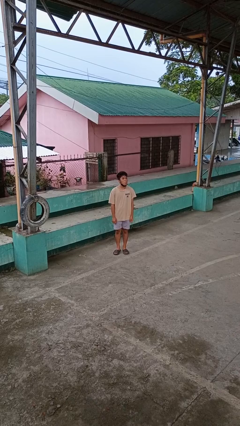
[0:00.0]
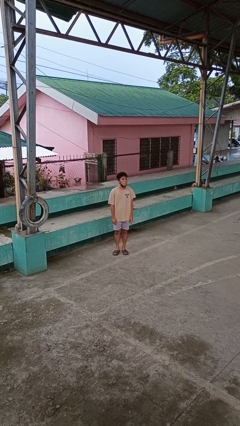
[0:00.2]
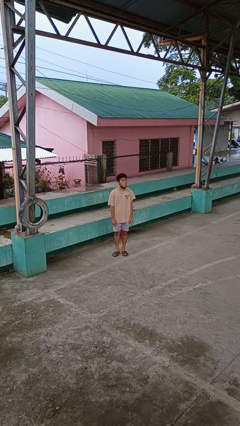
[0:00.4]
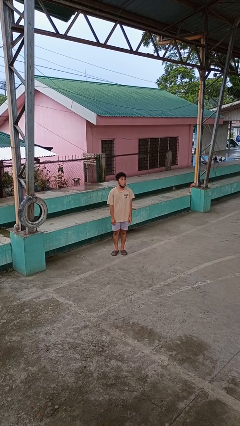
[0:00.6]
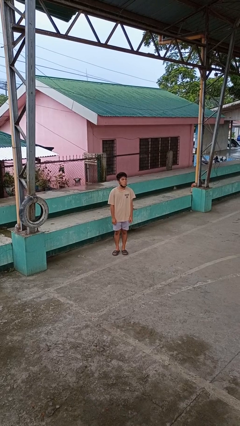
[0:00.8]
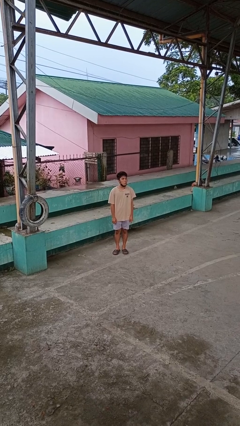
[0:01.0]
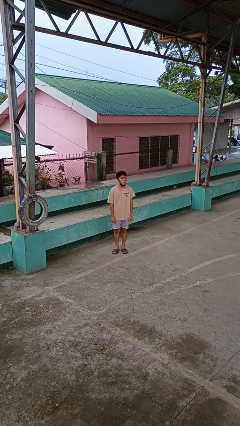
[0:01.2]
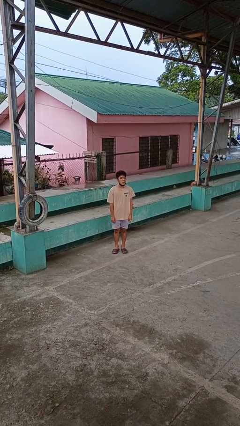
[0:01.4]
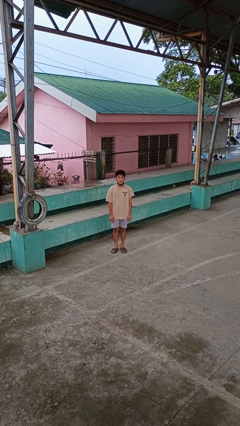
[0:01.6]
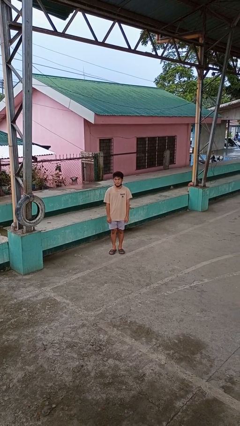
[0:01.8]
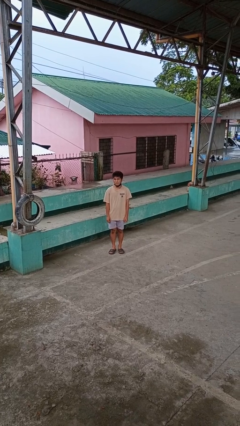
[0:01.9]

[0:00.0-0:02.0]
person sticks out tongue

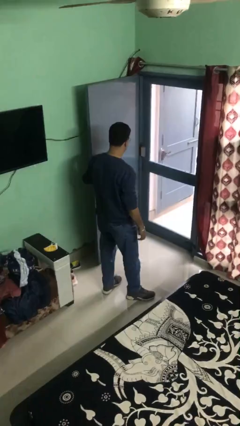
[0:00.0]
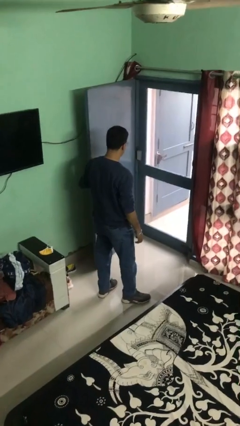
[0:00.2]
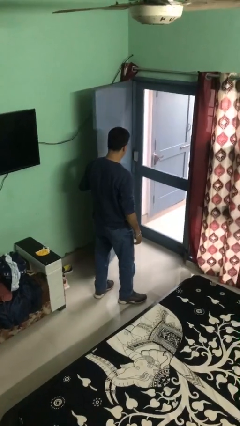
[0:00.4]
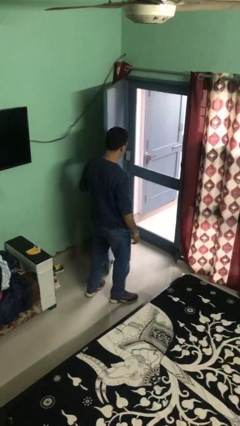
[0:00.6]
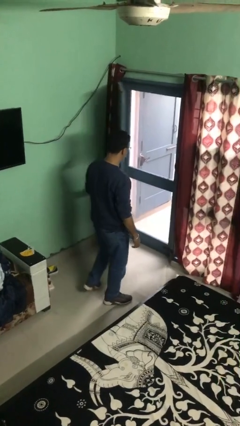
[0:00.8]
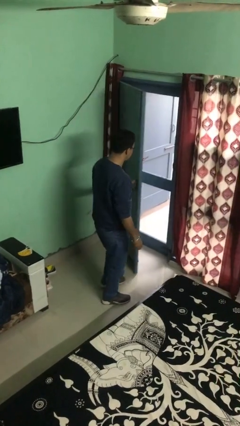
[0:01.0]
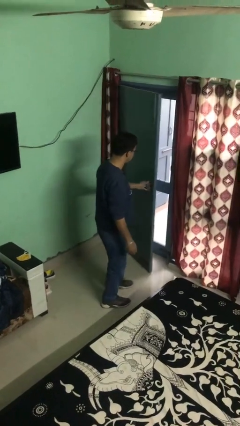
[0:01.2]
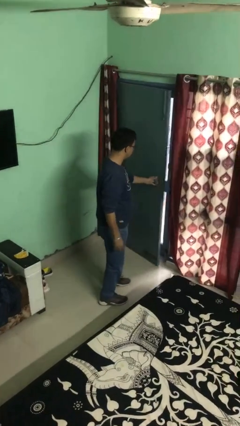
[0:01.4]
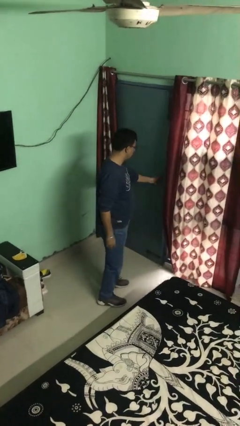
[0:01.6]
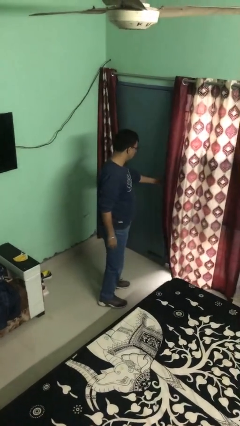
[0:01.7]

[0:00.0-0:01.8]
person closes facility door

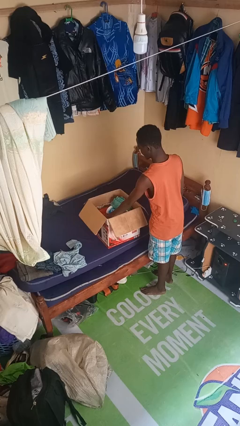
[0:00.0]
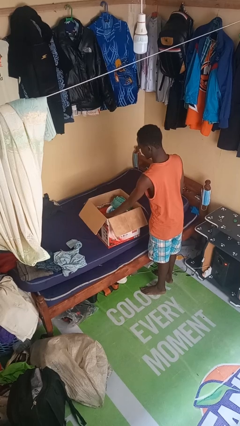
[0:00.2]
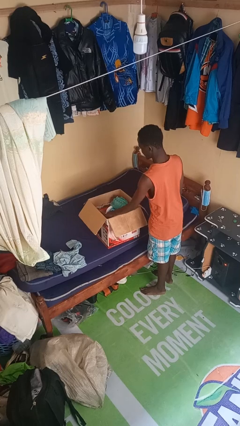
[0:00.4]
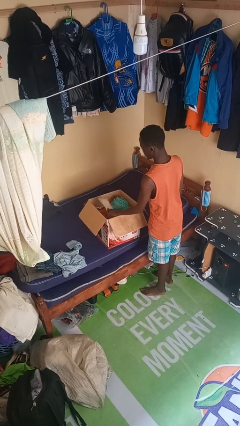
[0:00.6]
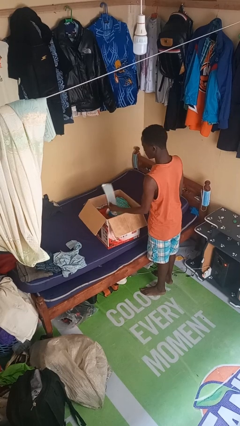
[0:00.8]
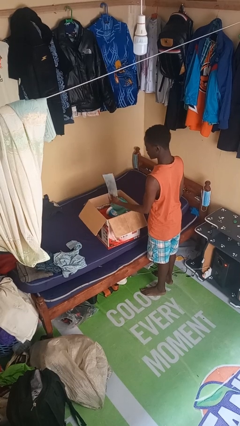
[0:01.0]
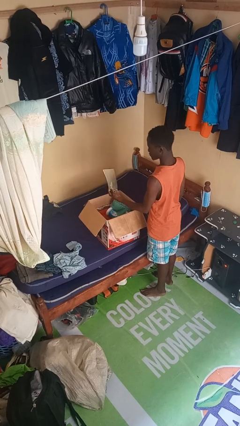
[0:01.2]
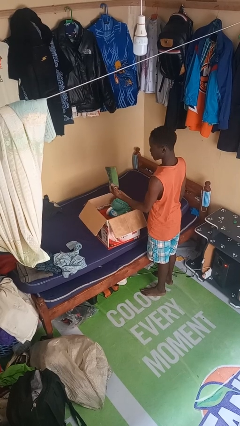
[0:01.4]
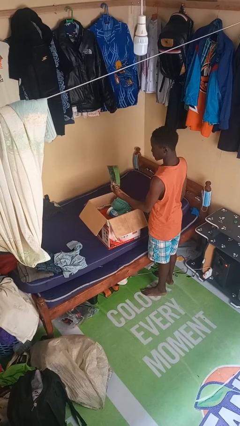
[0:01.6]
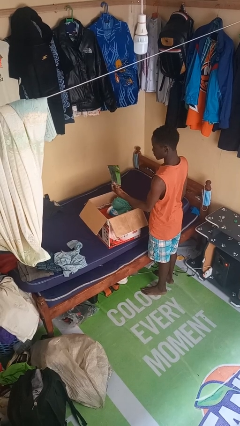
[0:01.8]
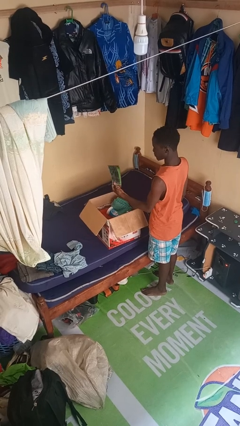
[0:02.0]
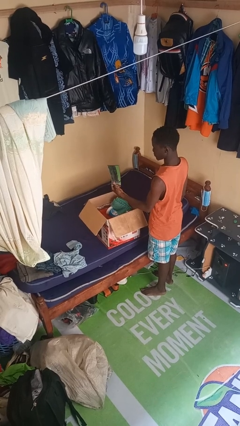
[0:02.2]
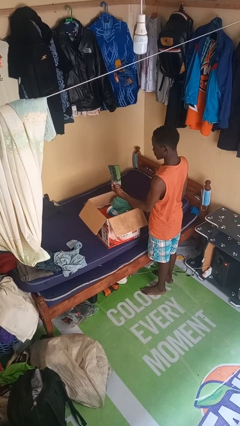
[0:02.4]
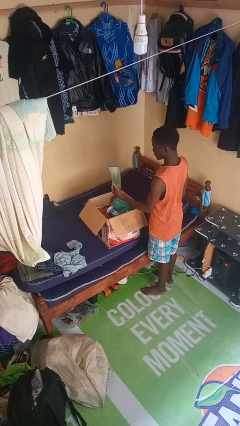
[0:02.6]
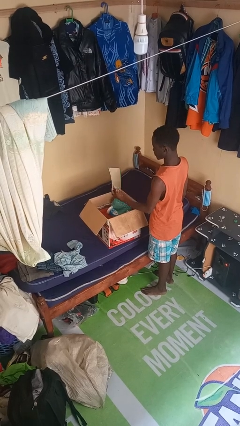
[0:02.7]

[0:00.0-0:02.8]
person takes object from box

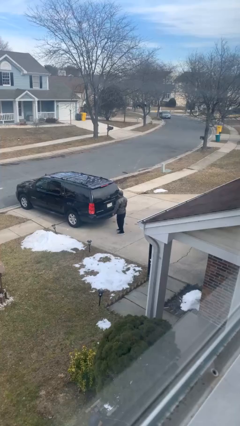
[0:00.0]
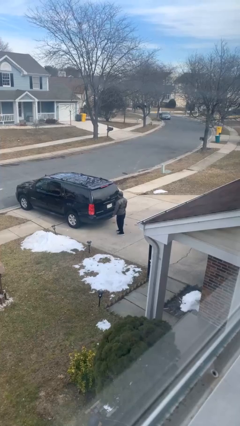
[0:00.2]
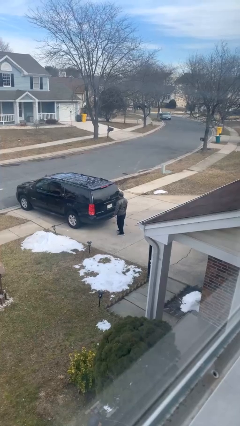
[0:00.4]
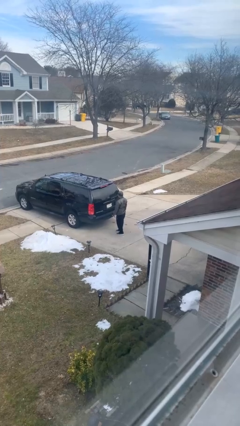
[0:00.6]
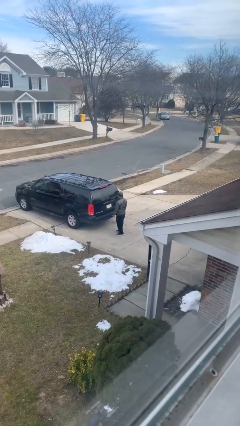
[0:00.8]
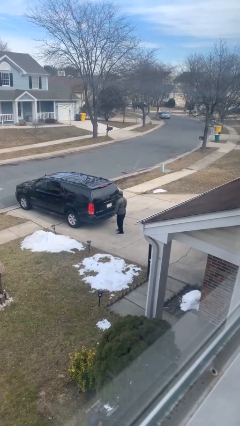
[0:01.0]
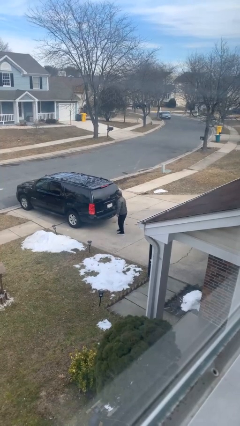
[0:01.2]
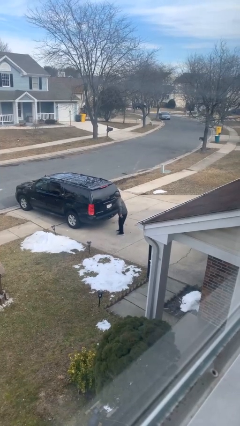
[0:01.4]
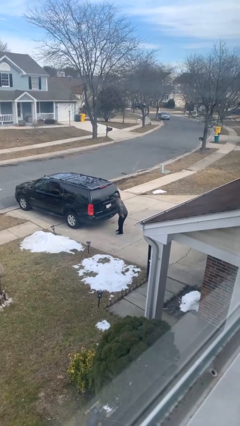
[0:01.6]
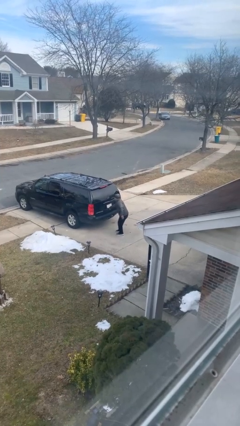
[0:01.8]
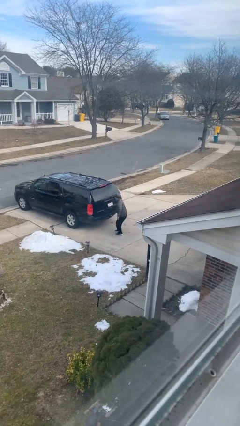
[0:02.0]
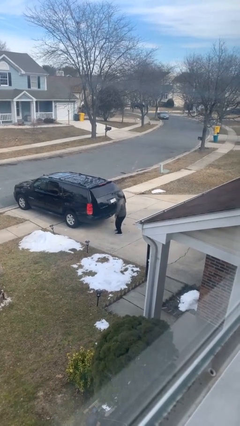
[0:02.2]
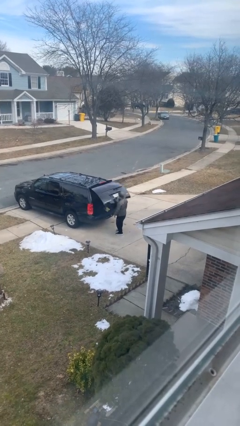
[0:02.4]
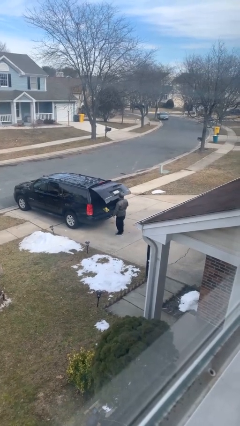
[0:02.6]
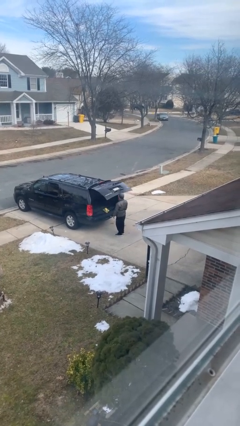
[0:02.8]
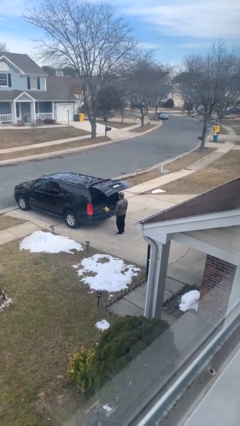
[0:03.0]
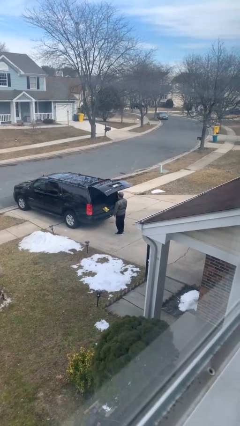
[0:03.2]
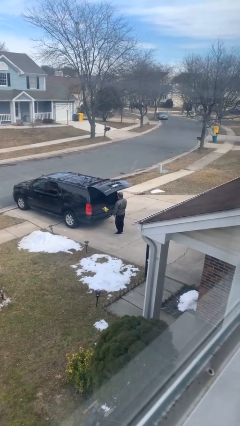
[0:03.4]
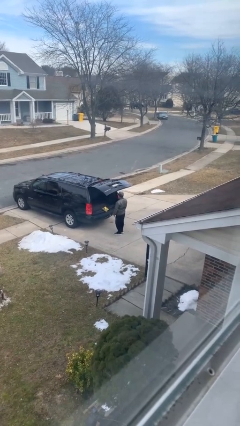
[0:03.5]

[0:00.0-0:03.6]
person opens car trunk

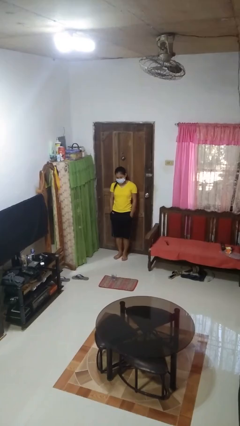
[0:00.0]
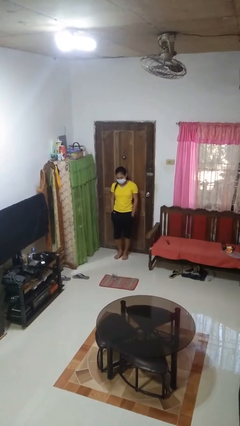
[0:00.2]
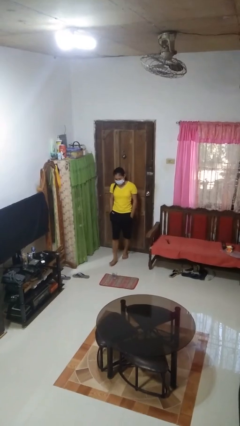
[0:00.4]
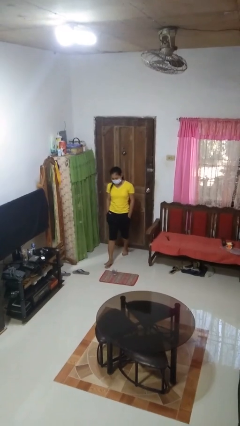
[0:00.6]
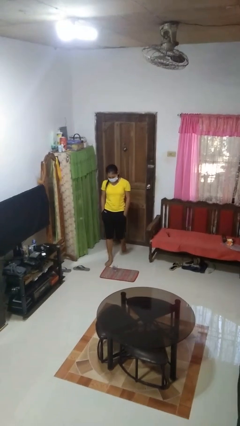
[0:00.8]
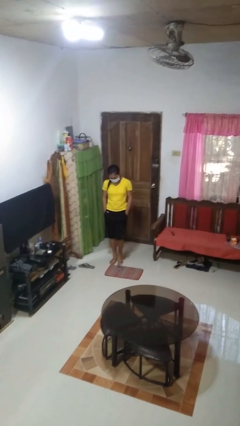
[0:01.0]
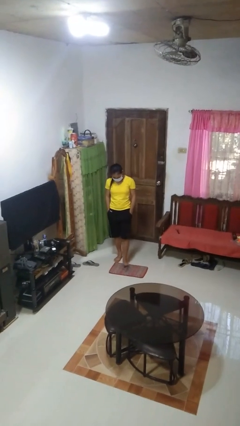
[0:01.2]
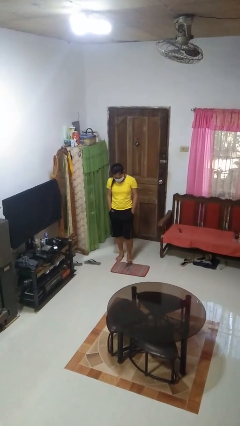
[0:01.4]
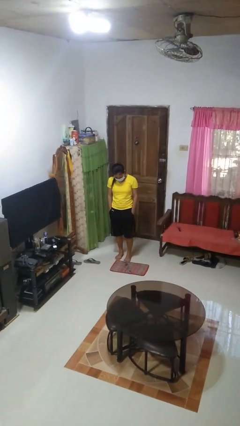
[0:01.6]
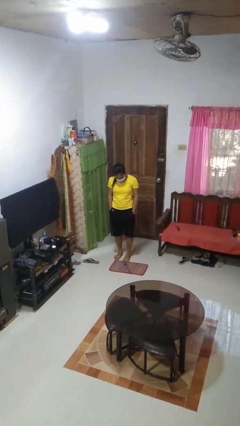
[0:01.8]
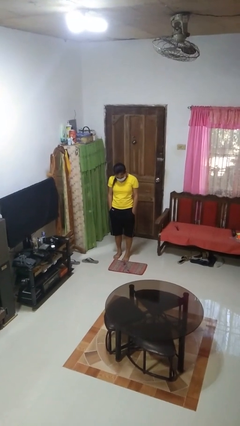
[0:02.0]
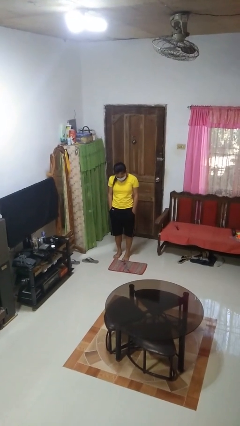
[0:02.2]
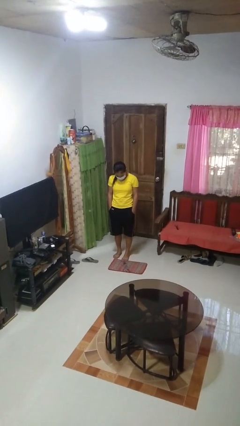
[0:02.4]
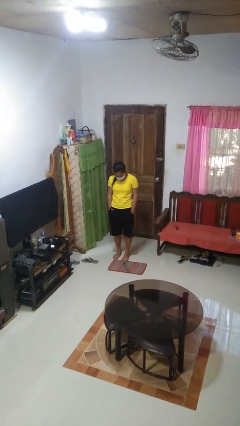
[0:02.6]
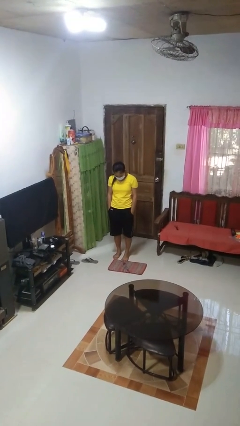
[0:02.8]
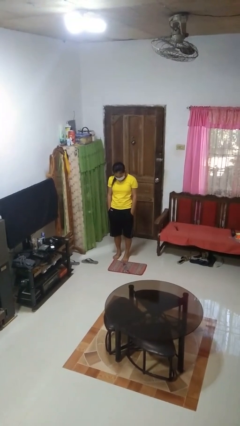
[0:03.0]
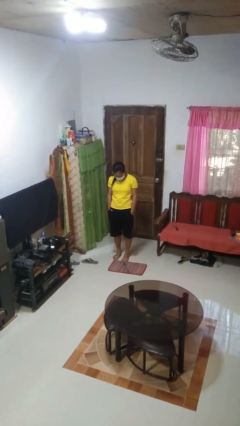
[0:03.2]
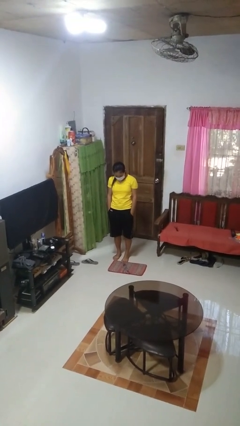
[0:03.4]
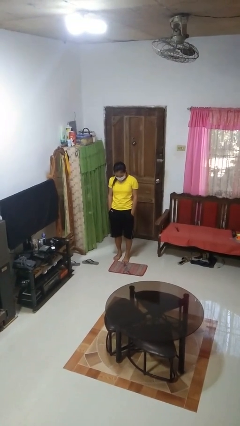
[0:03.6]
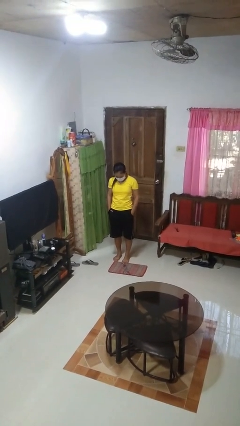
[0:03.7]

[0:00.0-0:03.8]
person spills on floor

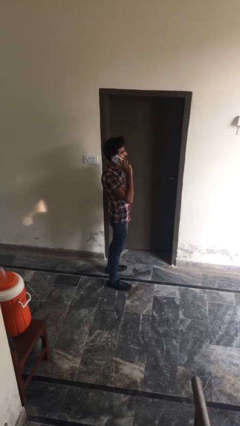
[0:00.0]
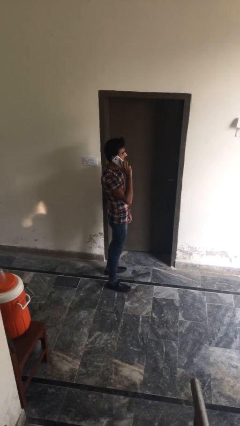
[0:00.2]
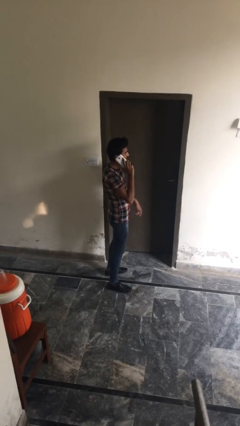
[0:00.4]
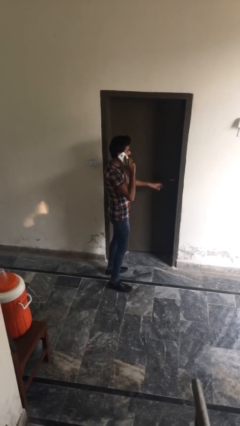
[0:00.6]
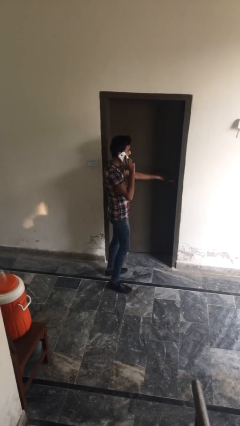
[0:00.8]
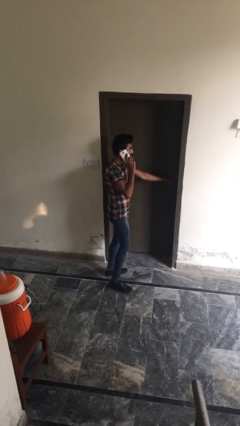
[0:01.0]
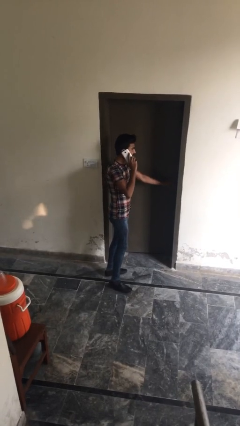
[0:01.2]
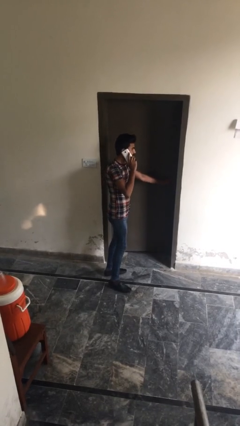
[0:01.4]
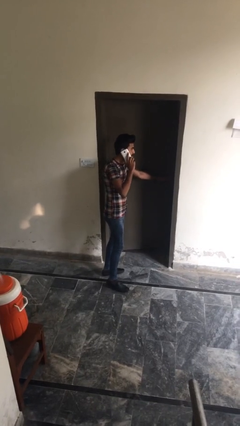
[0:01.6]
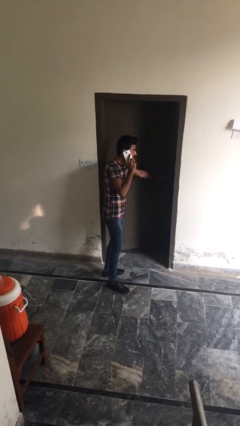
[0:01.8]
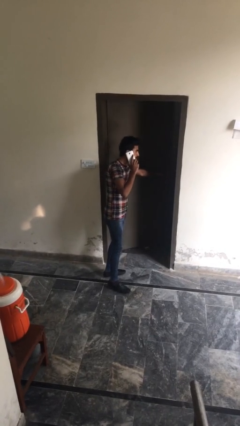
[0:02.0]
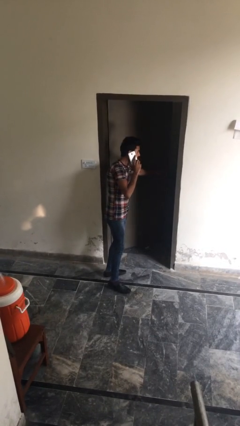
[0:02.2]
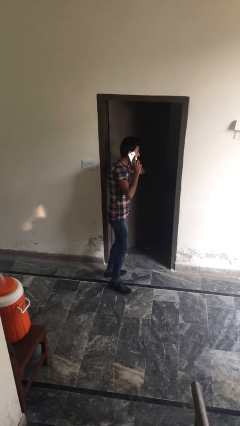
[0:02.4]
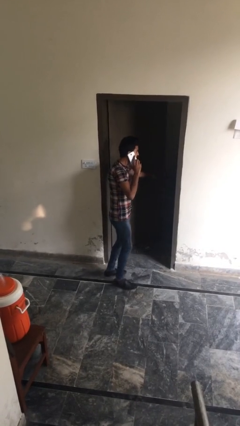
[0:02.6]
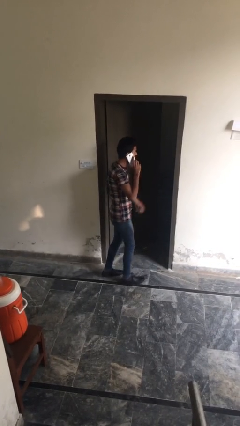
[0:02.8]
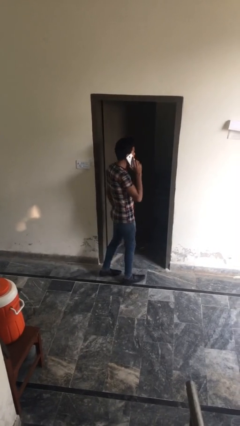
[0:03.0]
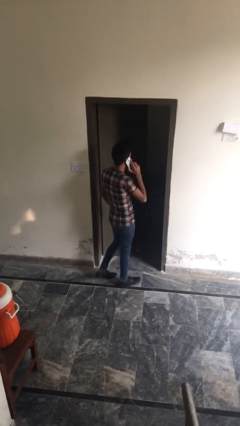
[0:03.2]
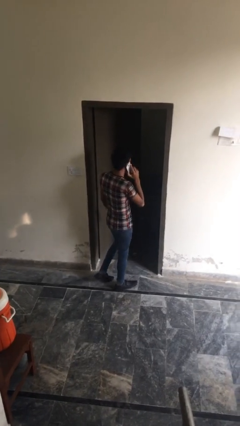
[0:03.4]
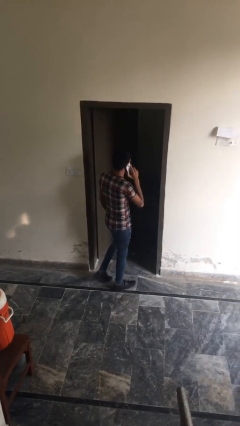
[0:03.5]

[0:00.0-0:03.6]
person opens facility door

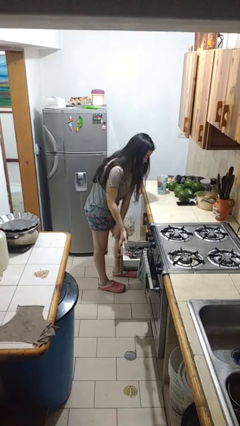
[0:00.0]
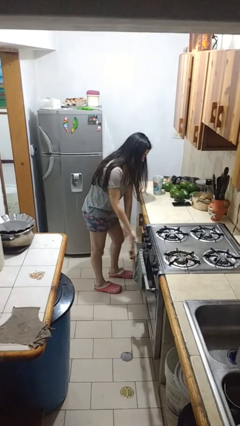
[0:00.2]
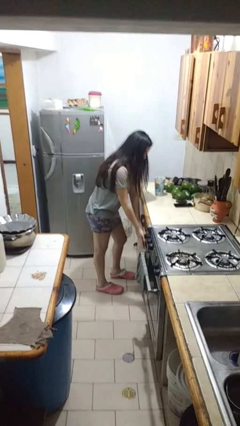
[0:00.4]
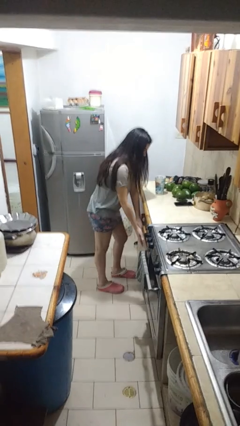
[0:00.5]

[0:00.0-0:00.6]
person closes kitchen drawer
